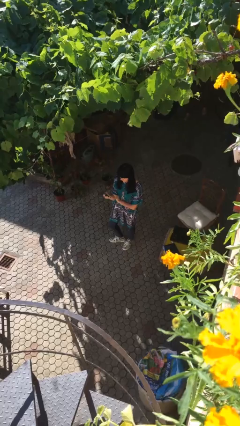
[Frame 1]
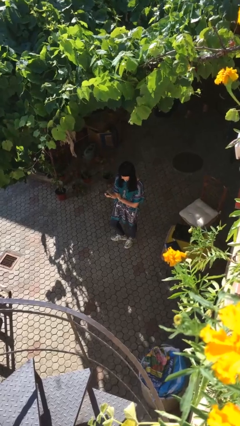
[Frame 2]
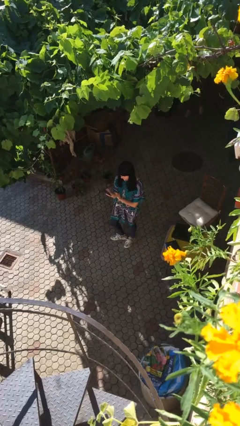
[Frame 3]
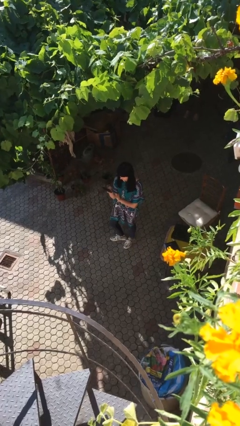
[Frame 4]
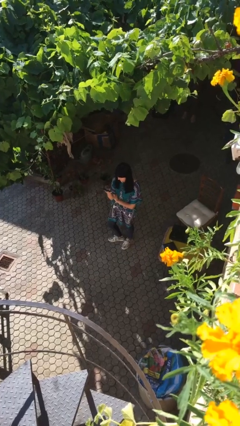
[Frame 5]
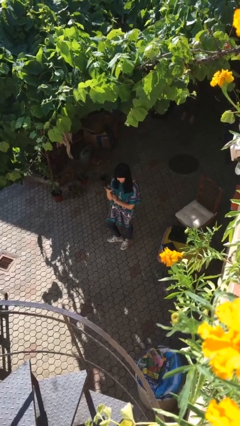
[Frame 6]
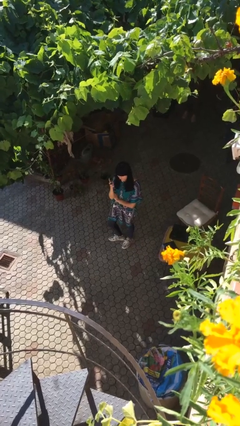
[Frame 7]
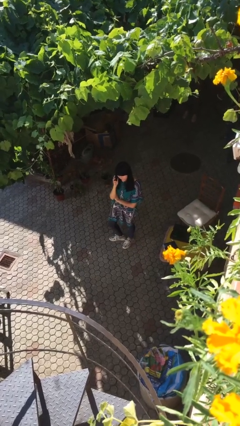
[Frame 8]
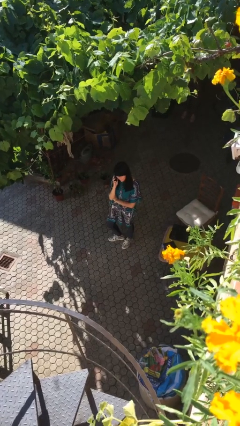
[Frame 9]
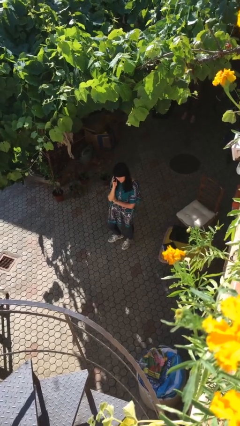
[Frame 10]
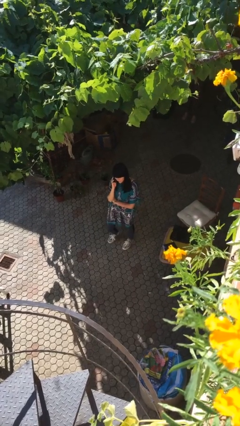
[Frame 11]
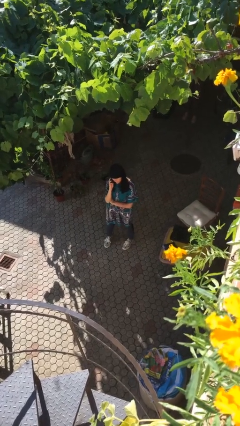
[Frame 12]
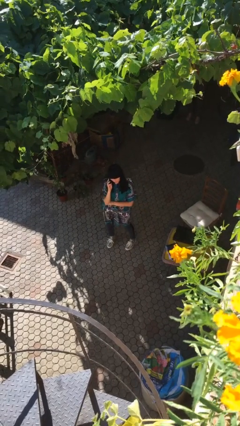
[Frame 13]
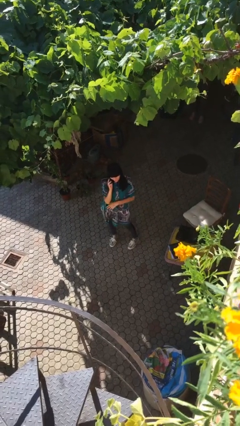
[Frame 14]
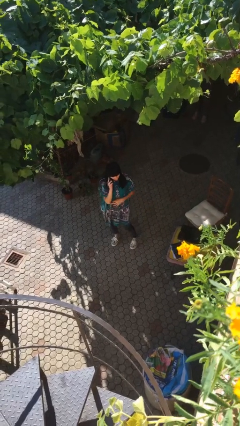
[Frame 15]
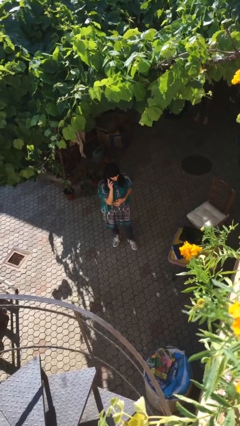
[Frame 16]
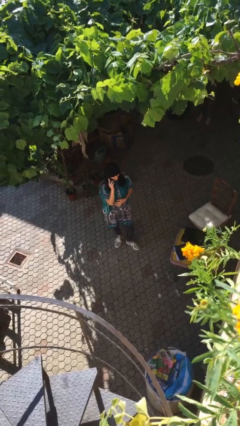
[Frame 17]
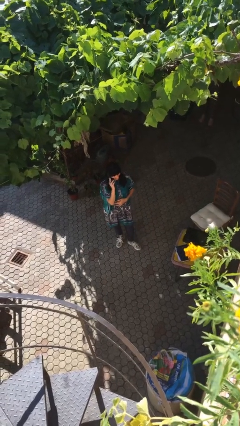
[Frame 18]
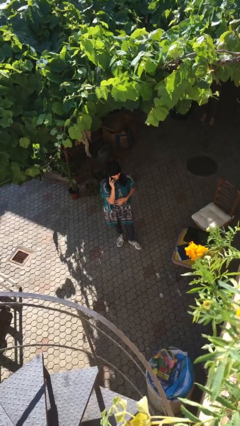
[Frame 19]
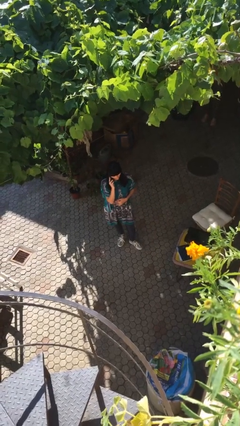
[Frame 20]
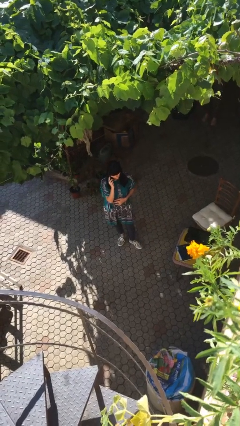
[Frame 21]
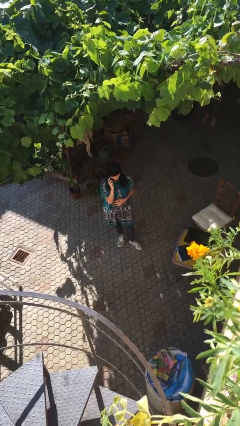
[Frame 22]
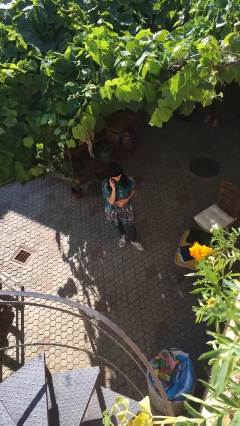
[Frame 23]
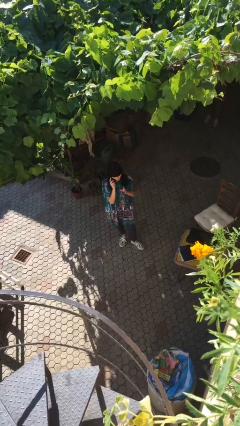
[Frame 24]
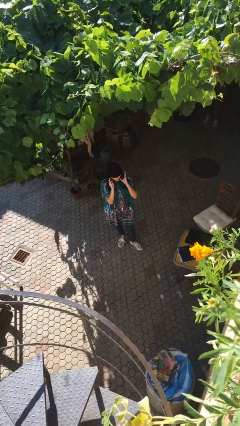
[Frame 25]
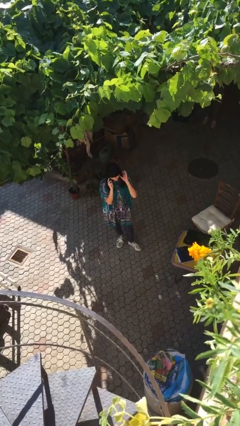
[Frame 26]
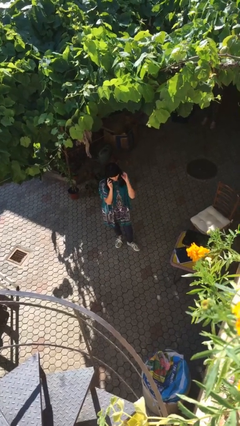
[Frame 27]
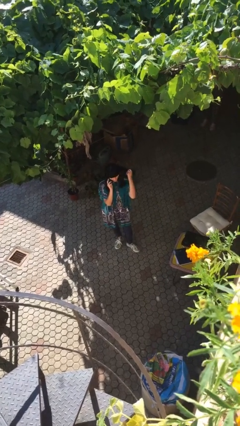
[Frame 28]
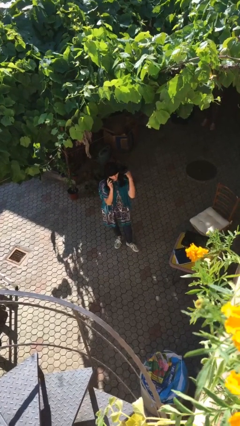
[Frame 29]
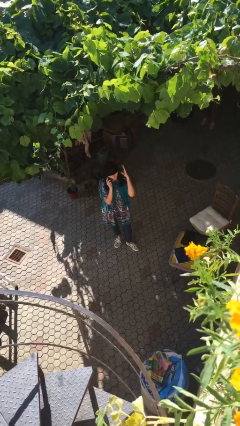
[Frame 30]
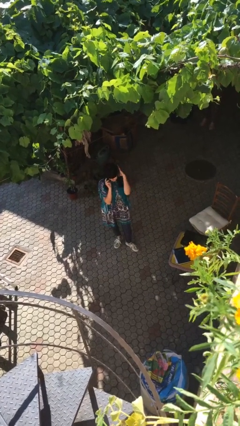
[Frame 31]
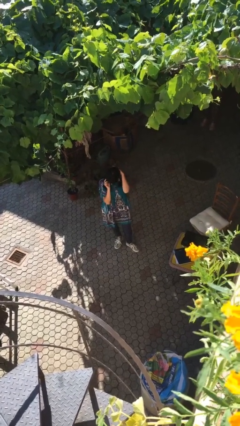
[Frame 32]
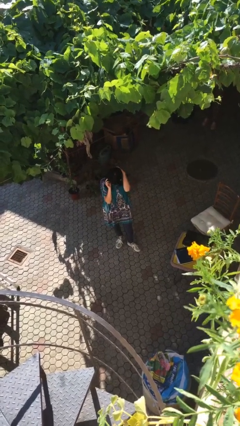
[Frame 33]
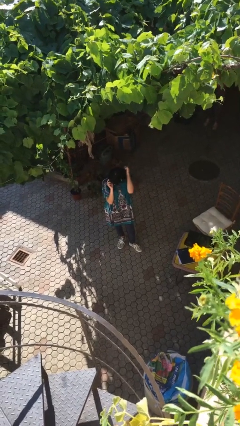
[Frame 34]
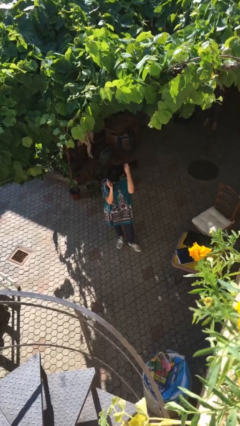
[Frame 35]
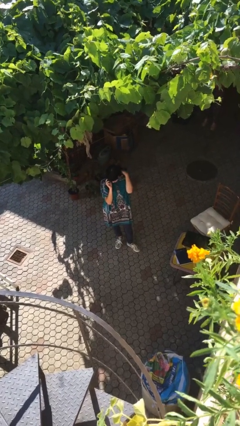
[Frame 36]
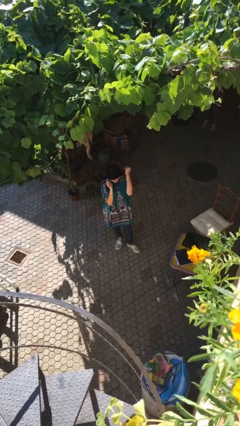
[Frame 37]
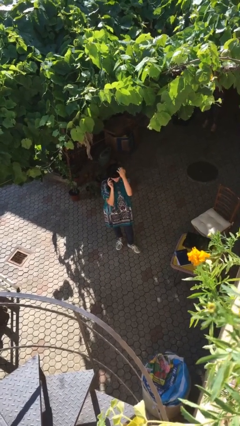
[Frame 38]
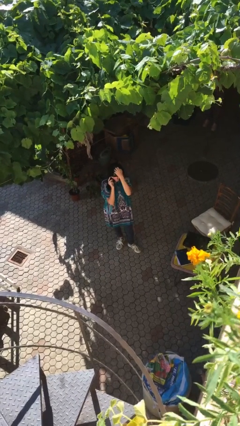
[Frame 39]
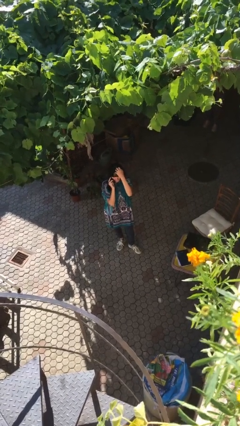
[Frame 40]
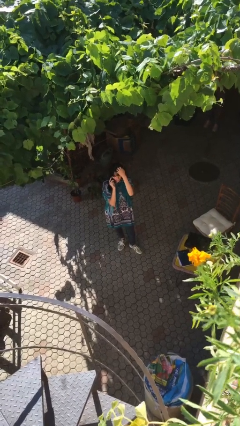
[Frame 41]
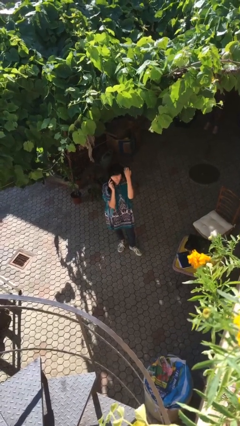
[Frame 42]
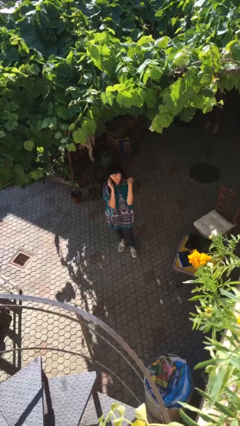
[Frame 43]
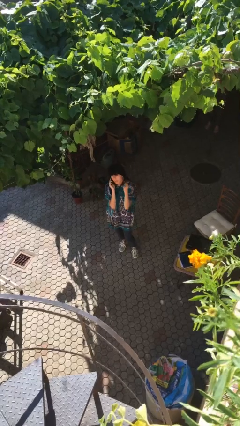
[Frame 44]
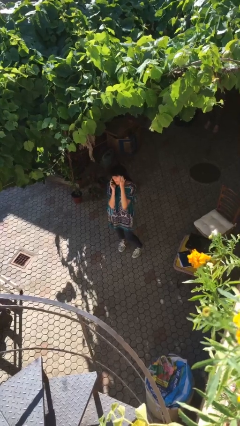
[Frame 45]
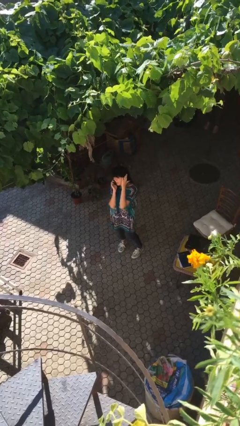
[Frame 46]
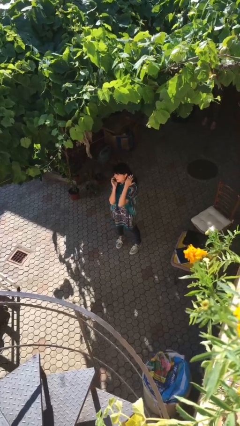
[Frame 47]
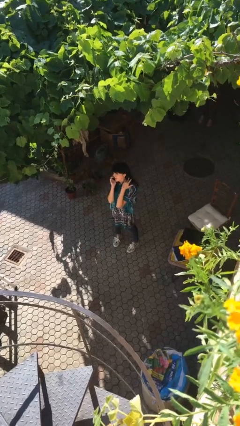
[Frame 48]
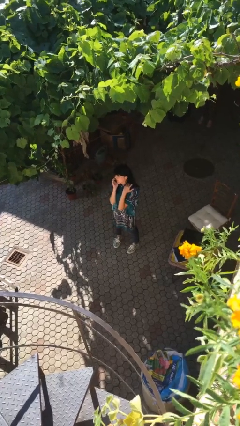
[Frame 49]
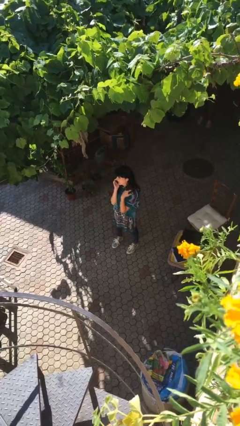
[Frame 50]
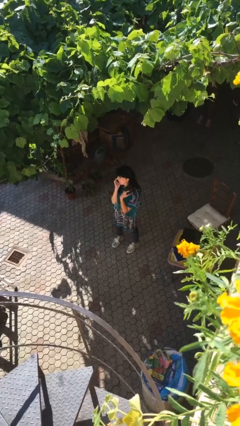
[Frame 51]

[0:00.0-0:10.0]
person talks on phone

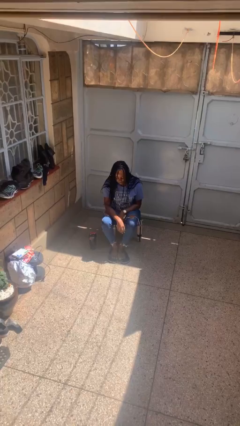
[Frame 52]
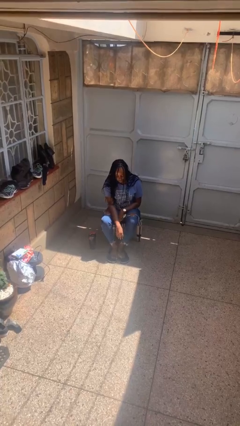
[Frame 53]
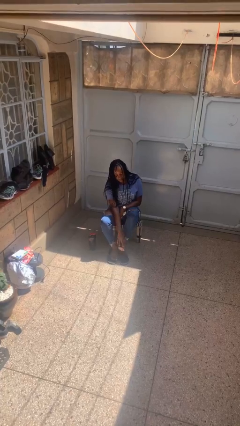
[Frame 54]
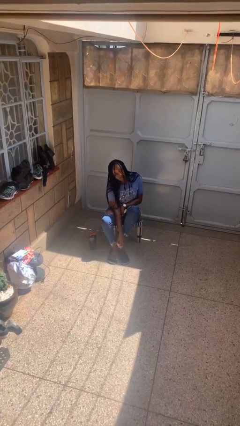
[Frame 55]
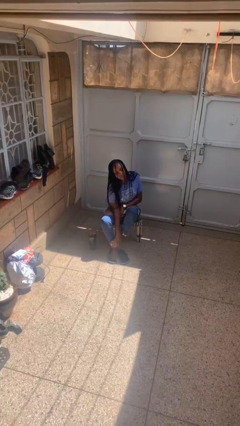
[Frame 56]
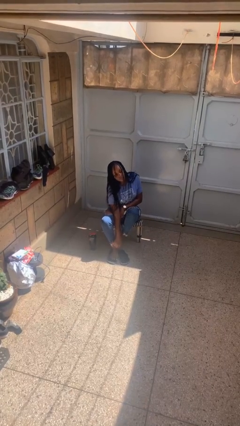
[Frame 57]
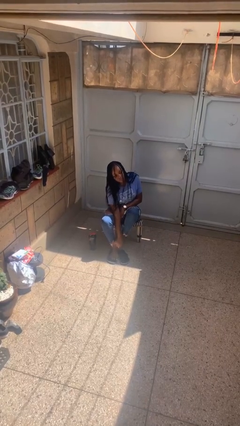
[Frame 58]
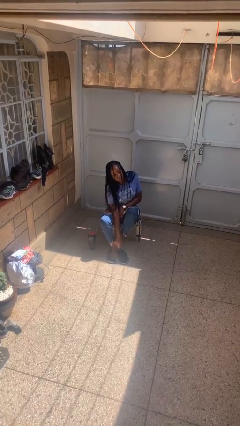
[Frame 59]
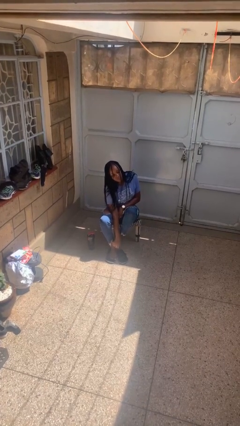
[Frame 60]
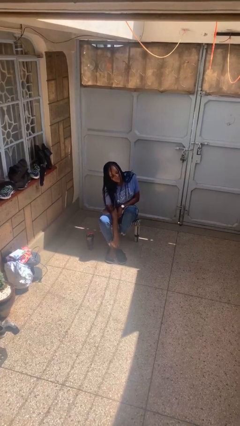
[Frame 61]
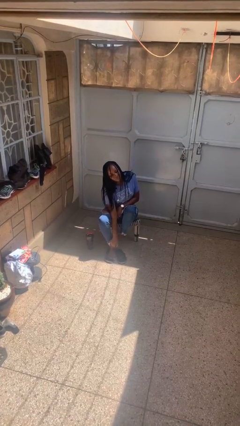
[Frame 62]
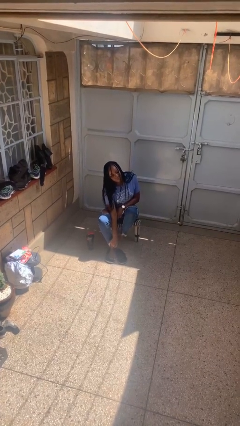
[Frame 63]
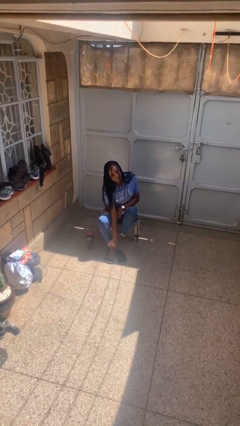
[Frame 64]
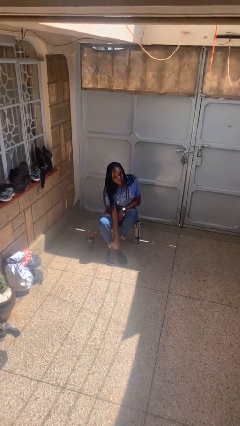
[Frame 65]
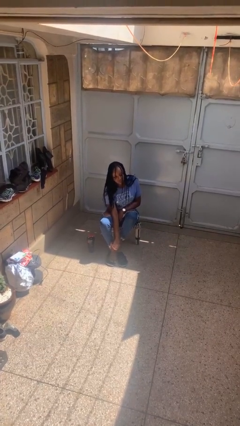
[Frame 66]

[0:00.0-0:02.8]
person rubs foot

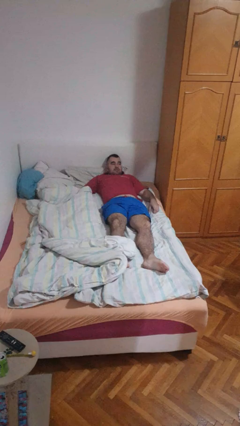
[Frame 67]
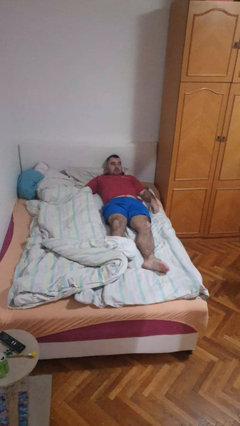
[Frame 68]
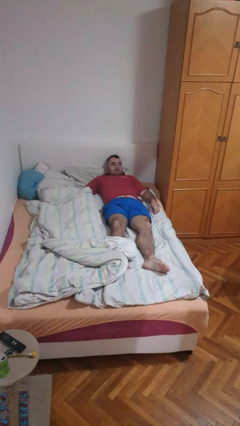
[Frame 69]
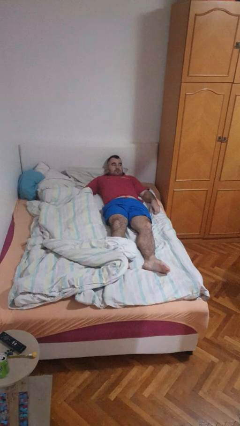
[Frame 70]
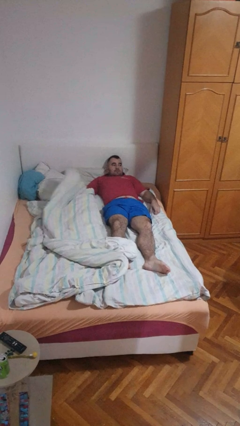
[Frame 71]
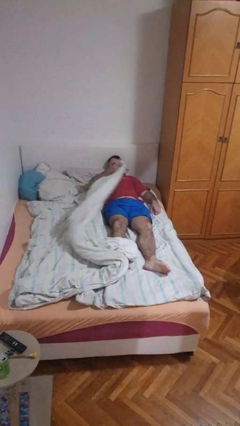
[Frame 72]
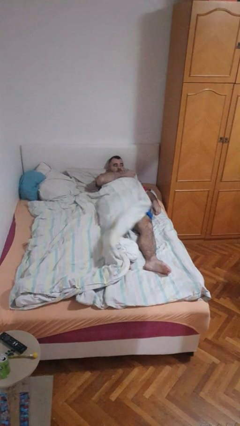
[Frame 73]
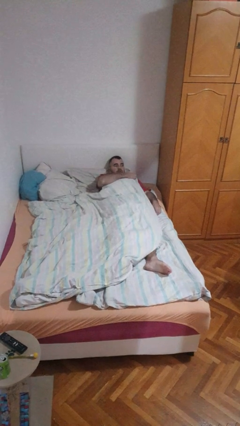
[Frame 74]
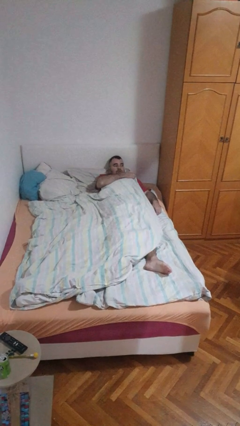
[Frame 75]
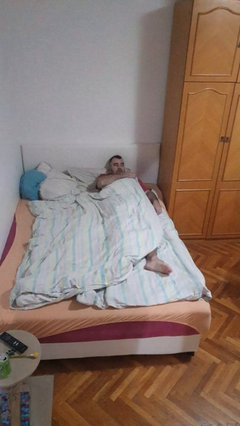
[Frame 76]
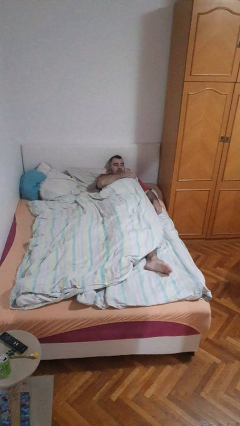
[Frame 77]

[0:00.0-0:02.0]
person covers with bedsheets

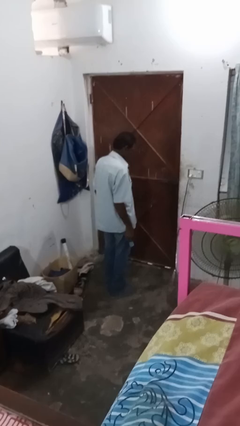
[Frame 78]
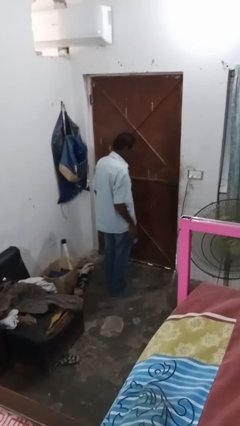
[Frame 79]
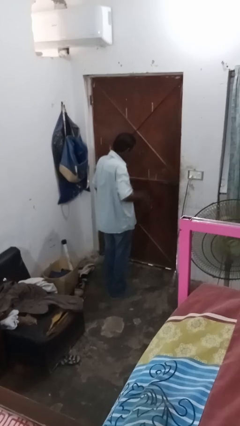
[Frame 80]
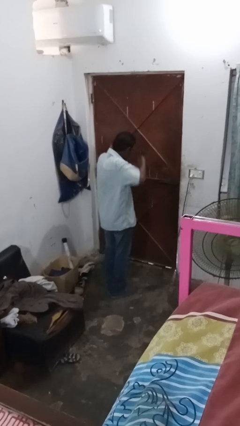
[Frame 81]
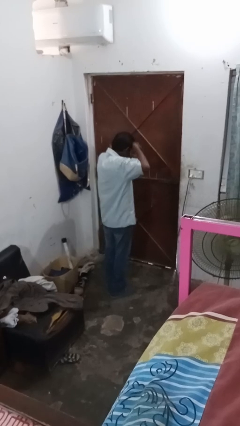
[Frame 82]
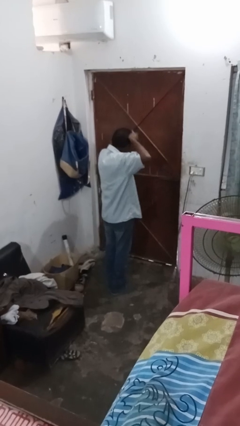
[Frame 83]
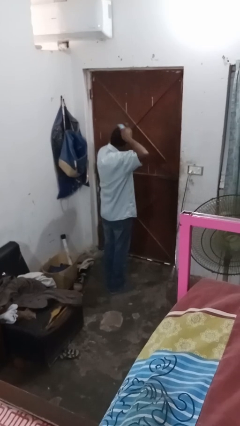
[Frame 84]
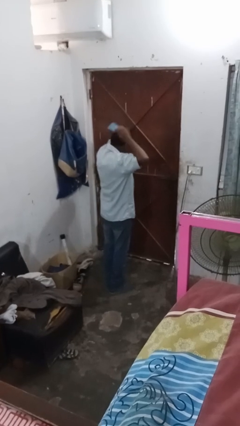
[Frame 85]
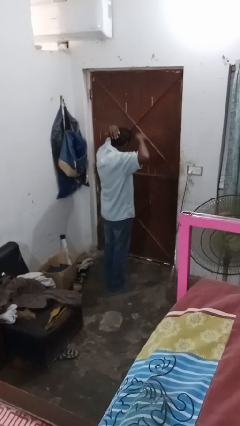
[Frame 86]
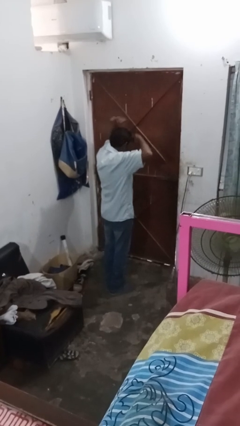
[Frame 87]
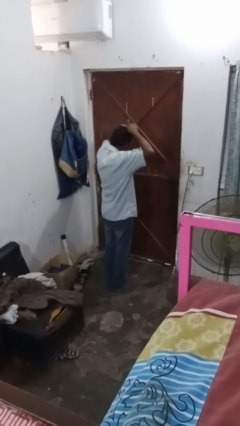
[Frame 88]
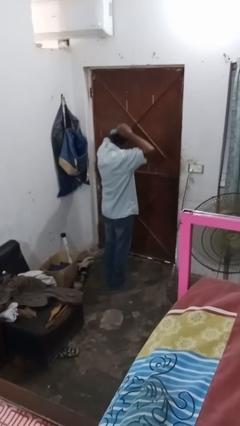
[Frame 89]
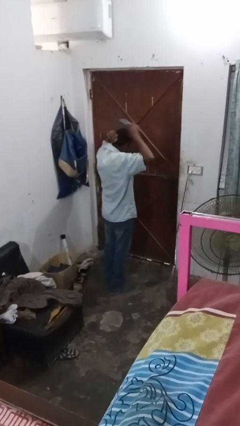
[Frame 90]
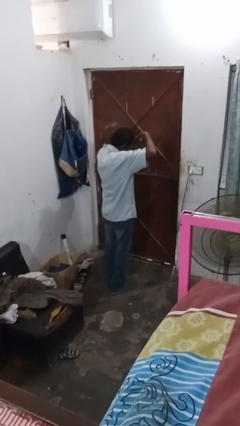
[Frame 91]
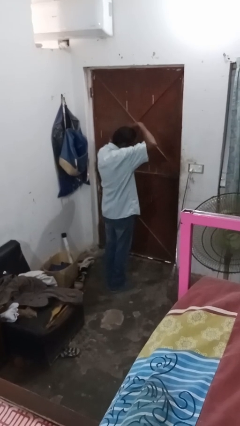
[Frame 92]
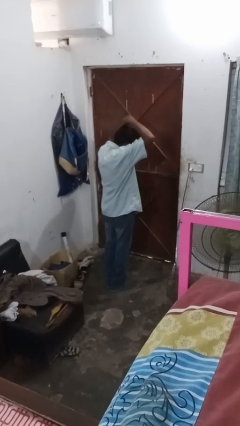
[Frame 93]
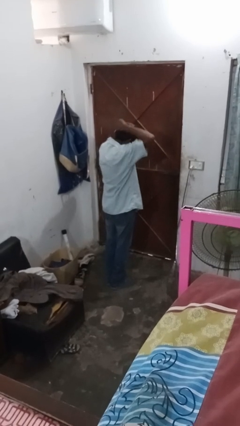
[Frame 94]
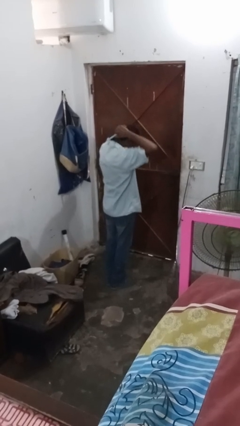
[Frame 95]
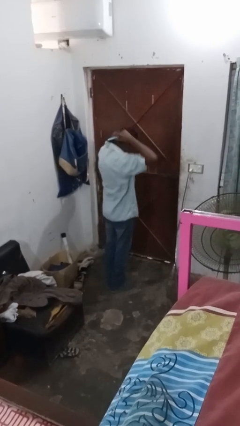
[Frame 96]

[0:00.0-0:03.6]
person brushes hair
